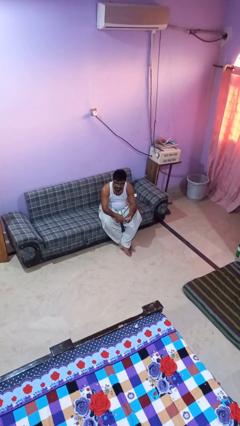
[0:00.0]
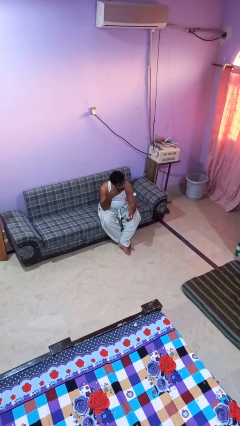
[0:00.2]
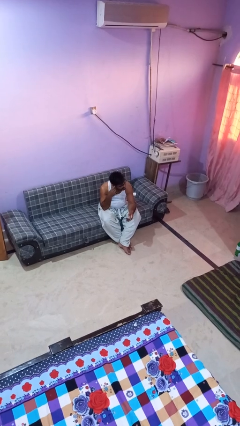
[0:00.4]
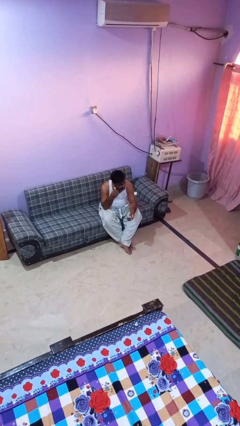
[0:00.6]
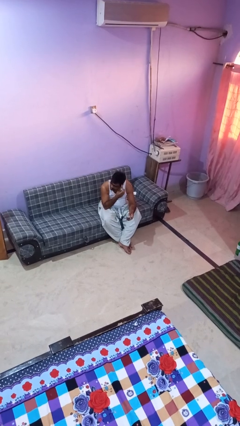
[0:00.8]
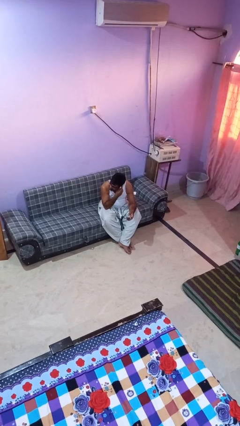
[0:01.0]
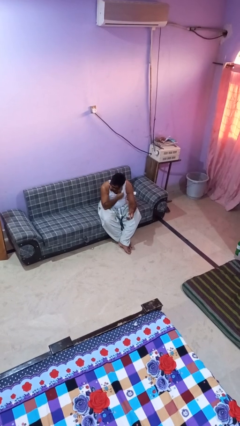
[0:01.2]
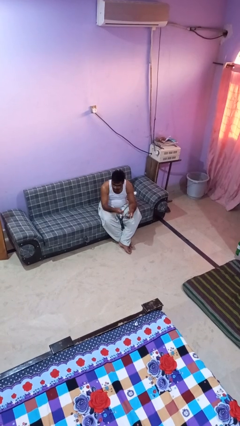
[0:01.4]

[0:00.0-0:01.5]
person takes off headphones

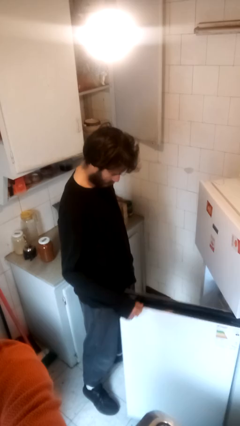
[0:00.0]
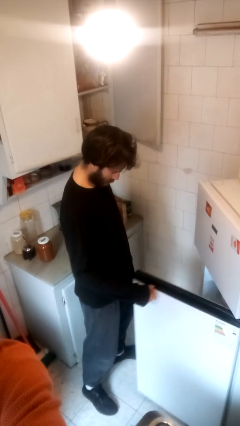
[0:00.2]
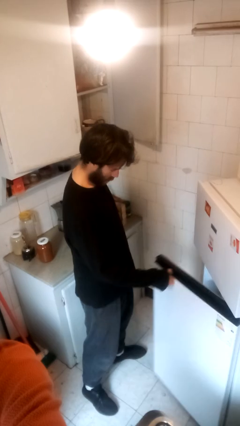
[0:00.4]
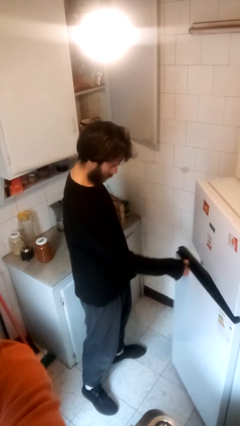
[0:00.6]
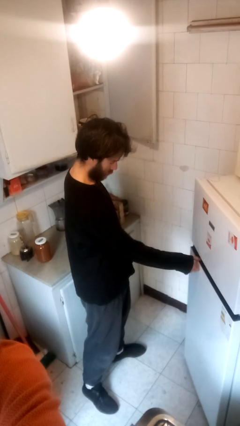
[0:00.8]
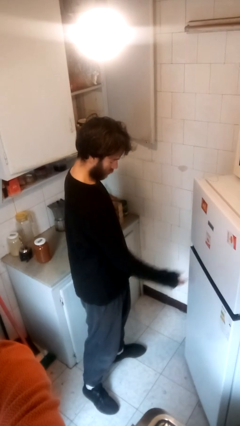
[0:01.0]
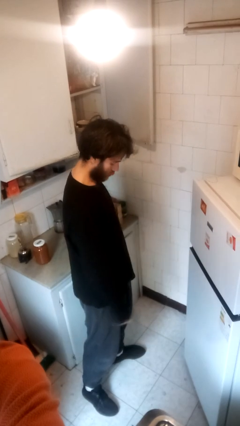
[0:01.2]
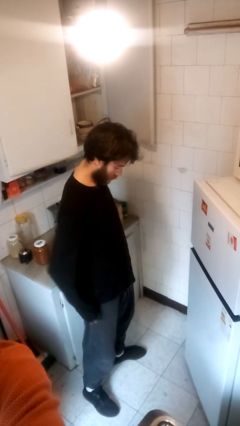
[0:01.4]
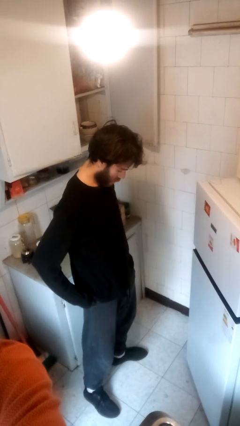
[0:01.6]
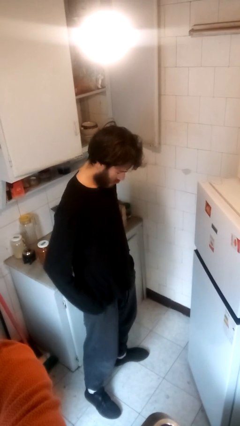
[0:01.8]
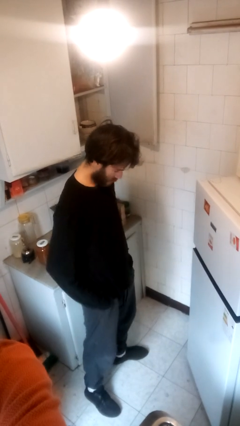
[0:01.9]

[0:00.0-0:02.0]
person closes refrigerator

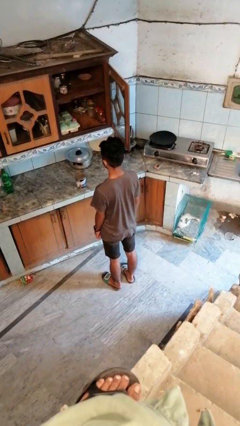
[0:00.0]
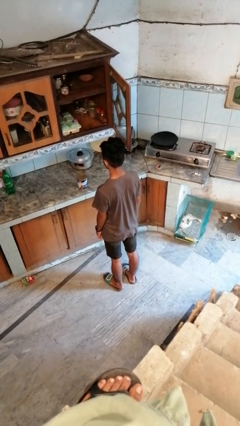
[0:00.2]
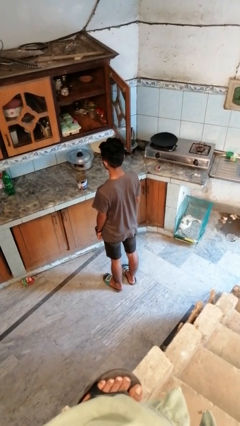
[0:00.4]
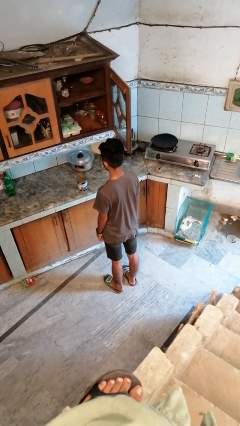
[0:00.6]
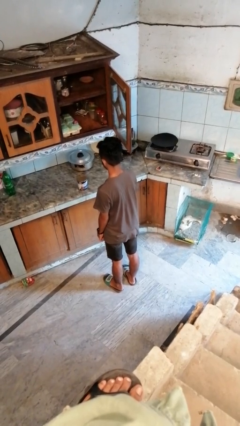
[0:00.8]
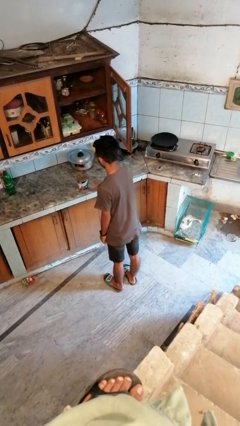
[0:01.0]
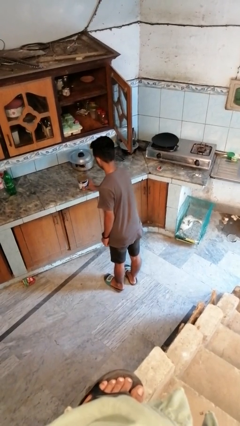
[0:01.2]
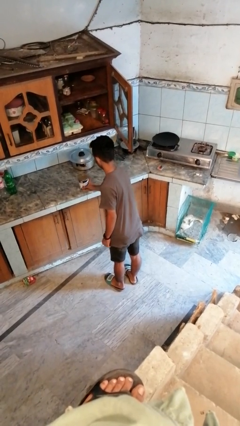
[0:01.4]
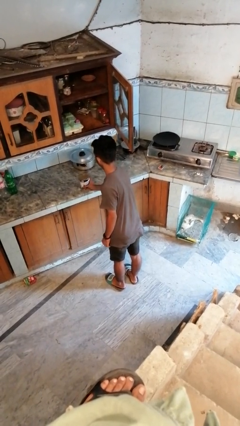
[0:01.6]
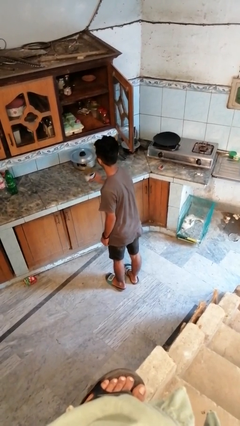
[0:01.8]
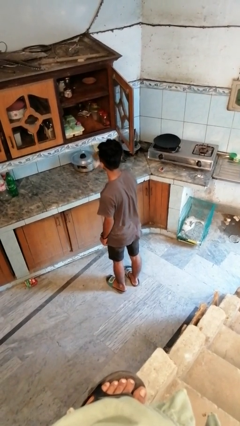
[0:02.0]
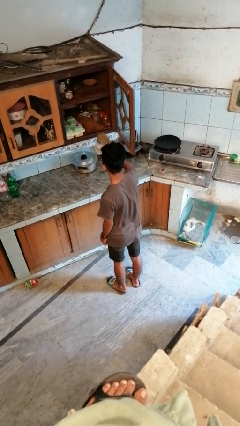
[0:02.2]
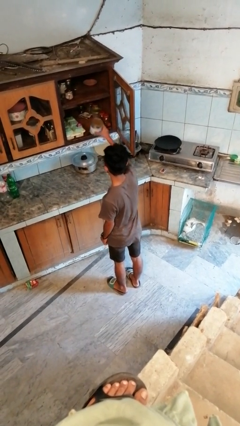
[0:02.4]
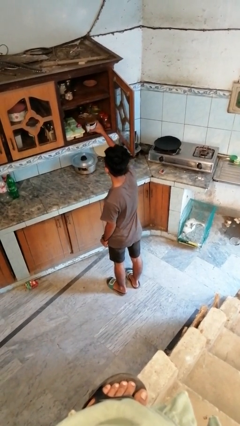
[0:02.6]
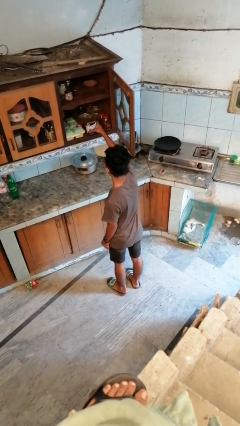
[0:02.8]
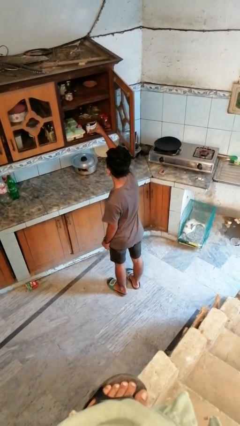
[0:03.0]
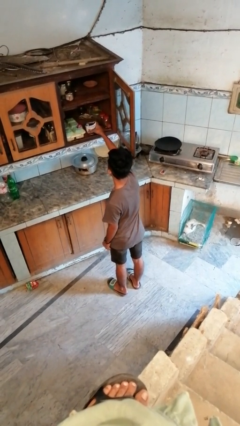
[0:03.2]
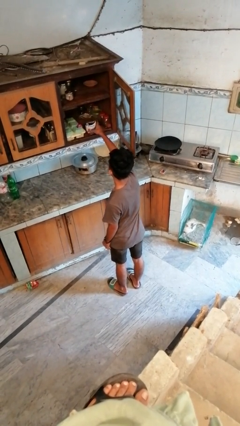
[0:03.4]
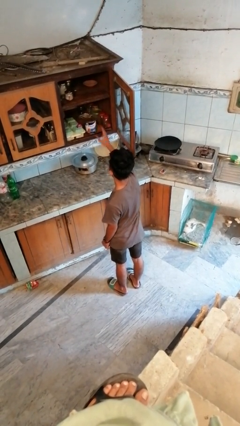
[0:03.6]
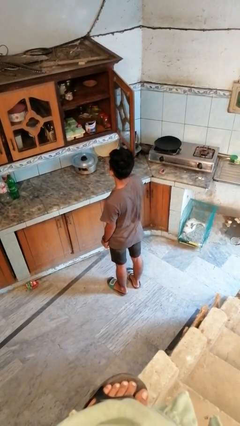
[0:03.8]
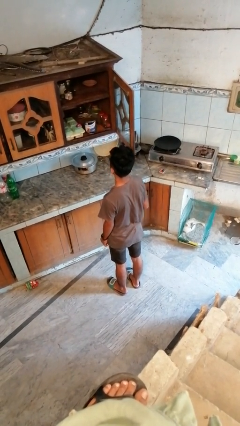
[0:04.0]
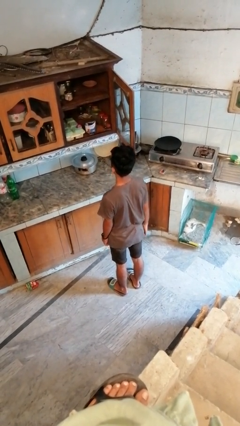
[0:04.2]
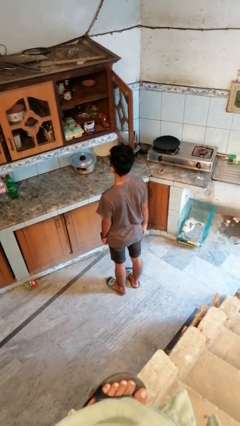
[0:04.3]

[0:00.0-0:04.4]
person puts object in cabinet

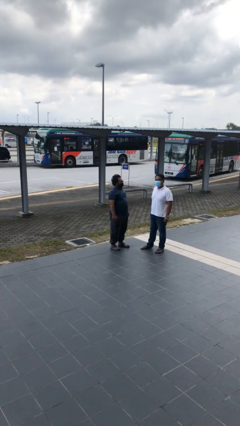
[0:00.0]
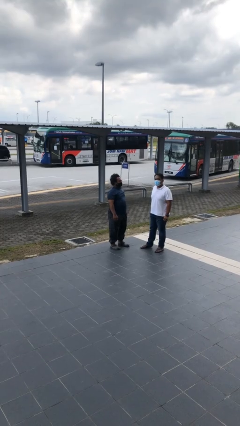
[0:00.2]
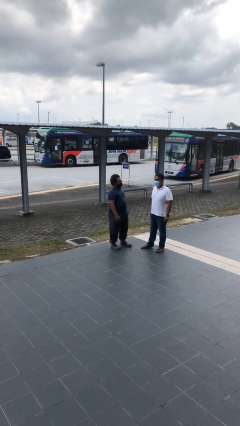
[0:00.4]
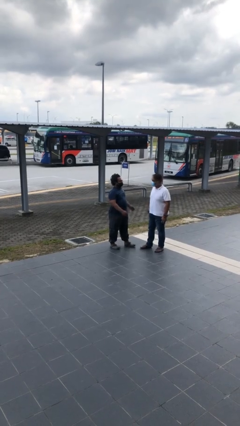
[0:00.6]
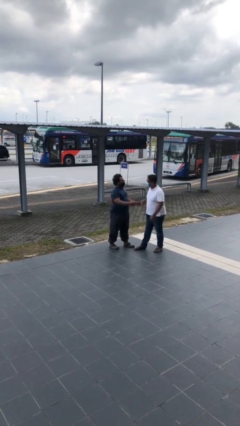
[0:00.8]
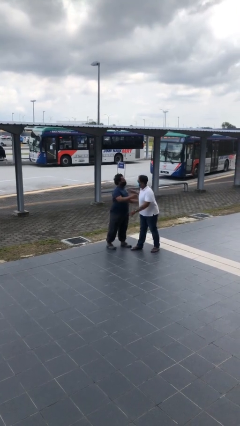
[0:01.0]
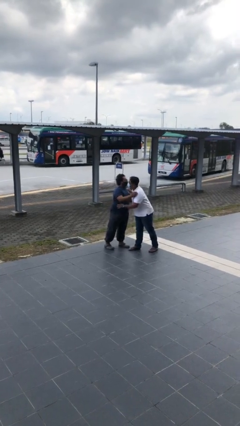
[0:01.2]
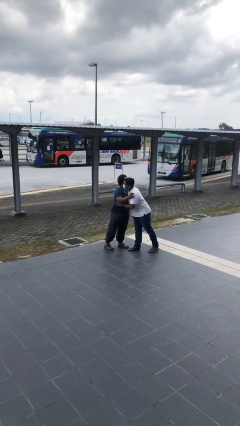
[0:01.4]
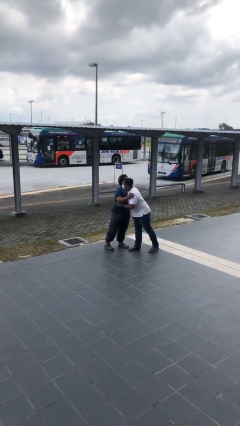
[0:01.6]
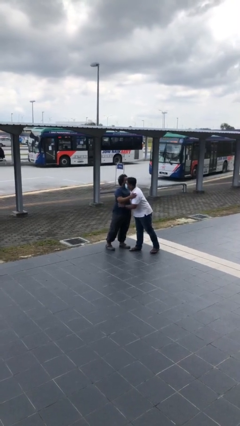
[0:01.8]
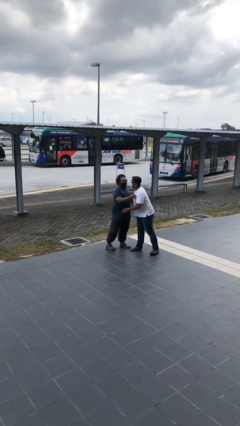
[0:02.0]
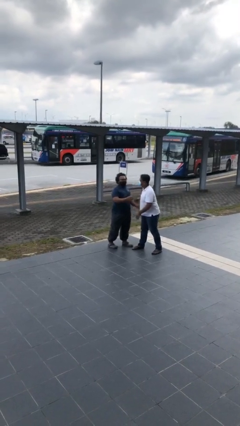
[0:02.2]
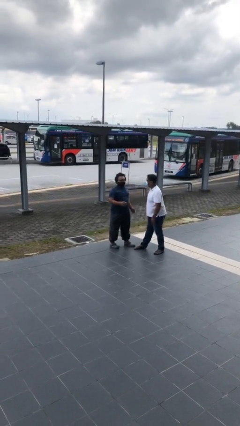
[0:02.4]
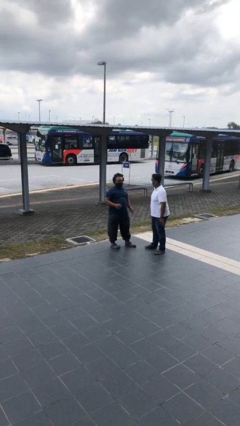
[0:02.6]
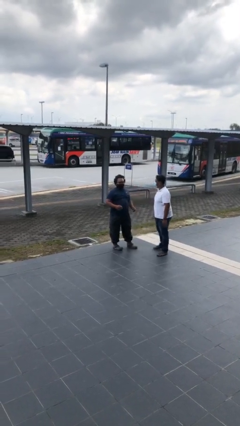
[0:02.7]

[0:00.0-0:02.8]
person embraces person

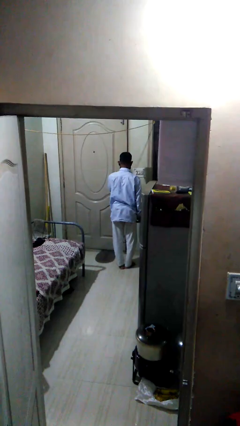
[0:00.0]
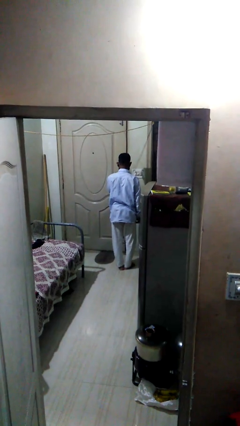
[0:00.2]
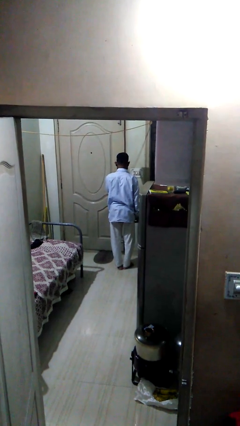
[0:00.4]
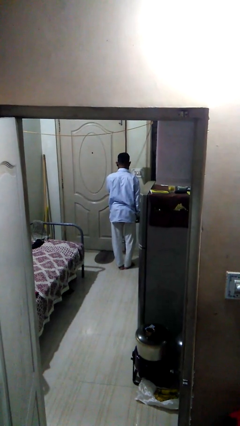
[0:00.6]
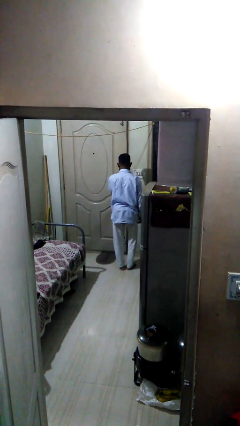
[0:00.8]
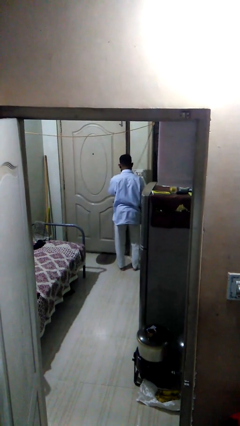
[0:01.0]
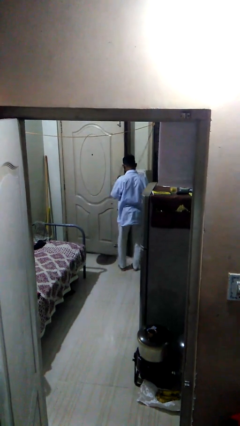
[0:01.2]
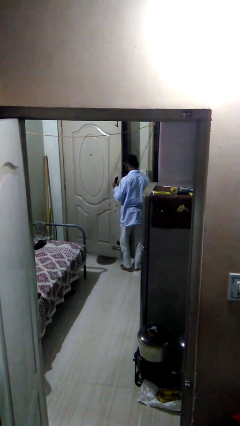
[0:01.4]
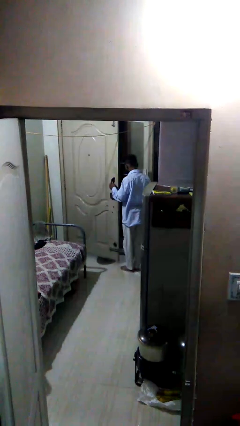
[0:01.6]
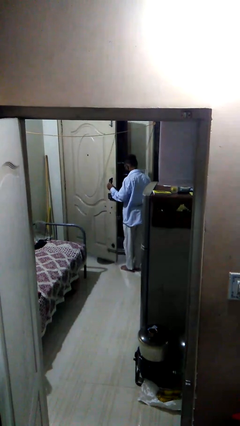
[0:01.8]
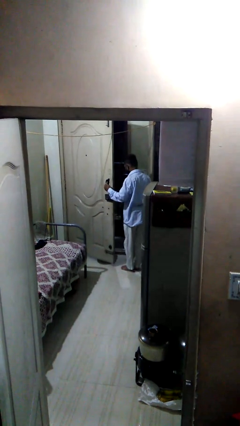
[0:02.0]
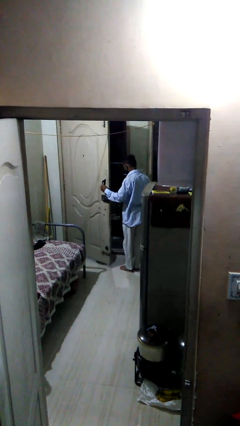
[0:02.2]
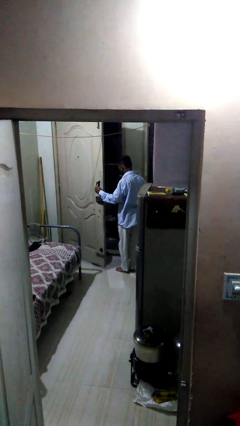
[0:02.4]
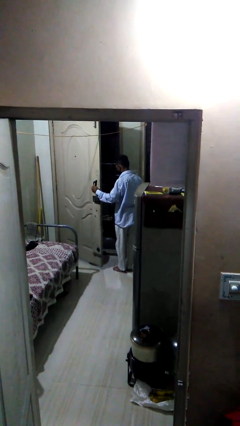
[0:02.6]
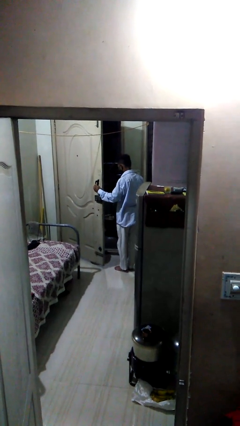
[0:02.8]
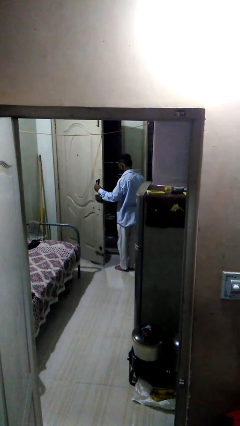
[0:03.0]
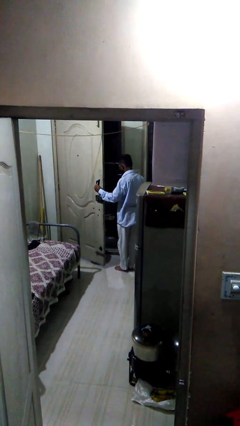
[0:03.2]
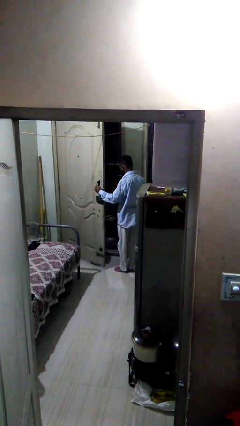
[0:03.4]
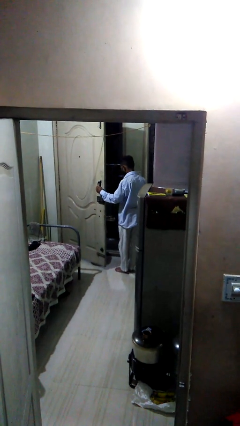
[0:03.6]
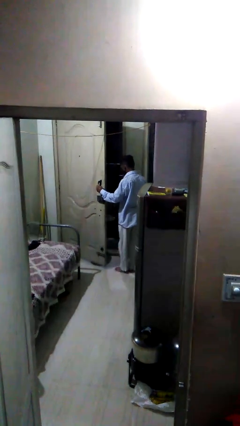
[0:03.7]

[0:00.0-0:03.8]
person opens facility door

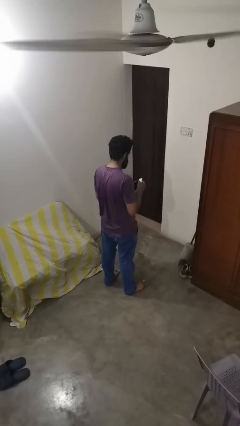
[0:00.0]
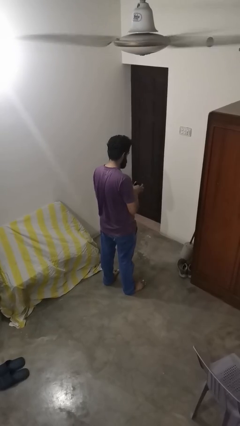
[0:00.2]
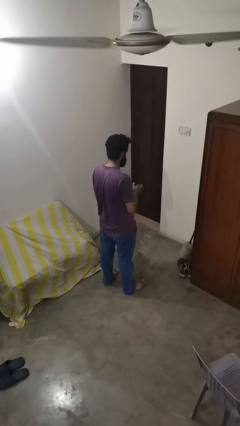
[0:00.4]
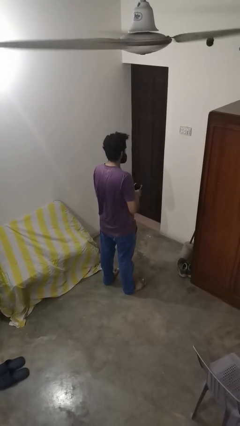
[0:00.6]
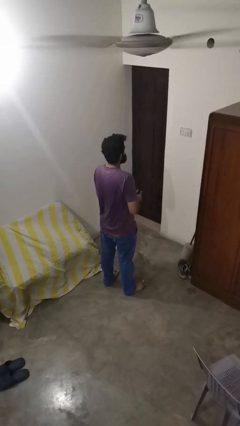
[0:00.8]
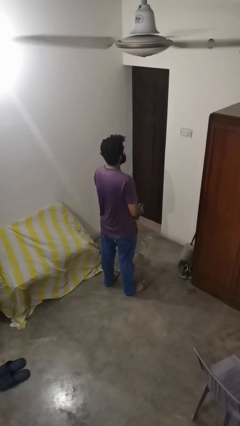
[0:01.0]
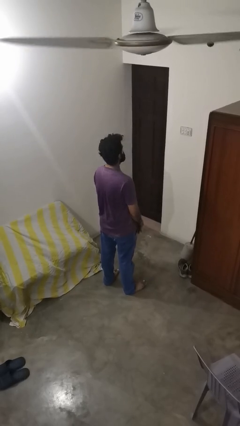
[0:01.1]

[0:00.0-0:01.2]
person puts object into purse

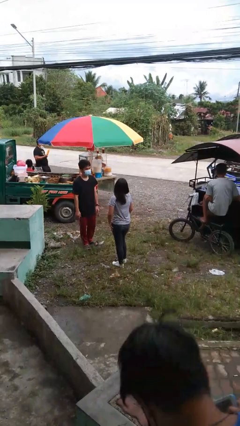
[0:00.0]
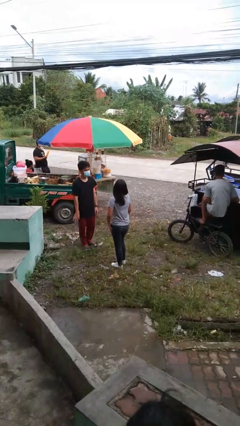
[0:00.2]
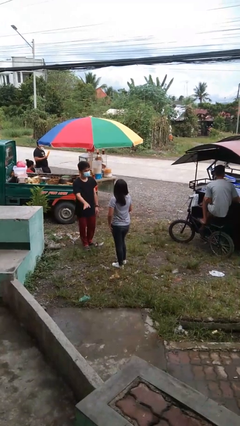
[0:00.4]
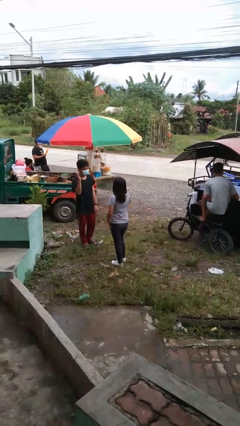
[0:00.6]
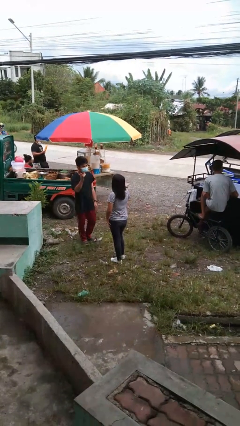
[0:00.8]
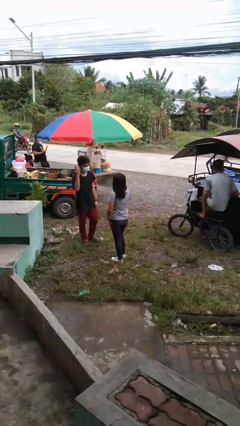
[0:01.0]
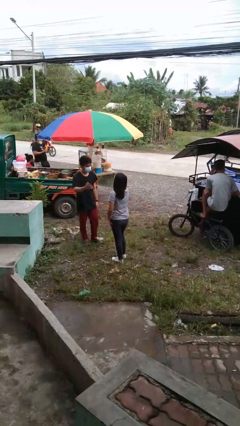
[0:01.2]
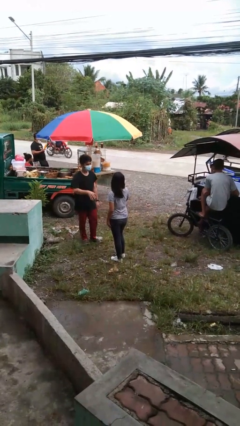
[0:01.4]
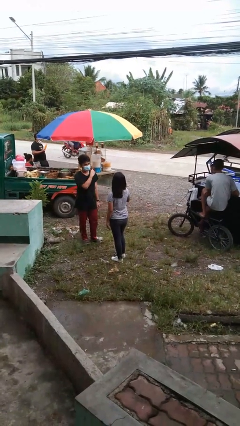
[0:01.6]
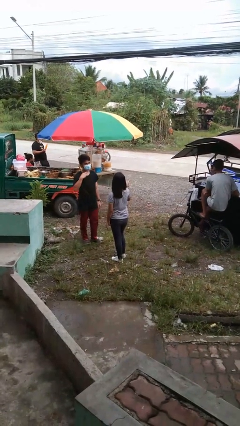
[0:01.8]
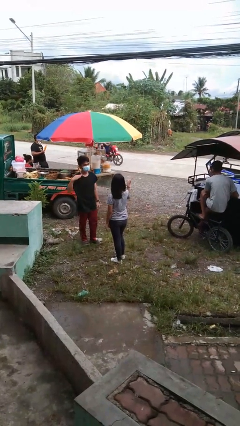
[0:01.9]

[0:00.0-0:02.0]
person talks to person
